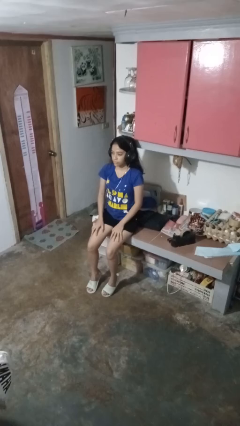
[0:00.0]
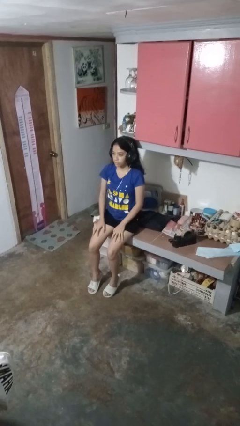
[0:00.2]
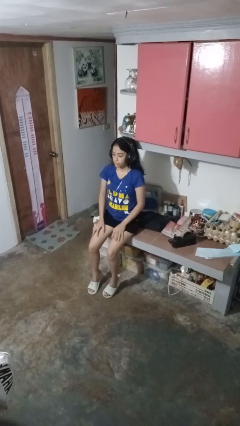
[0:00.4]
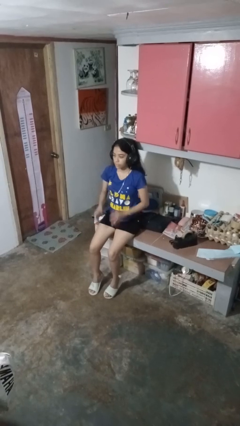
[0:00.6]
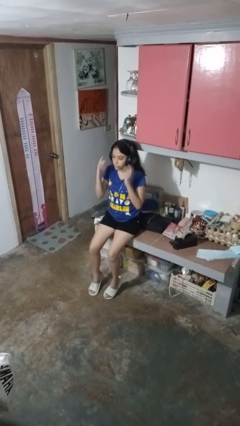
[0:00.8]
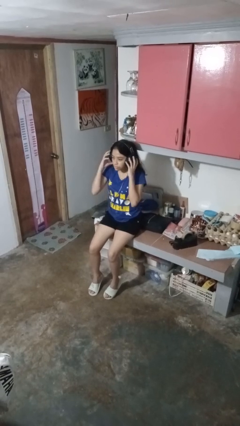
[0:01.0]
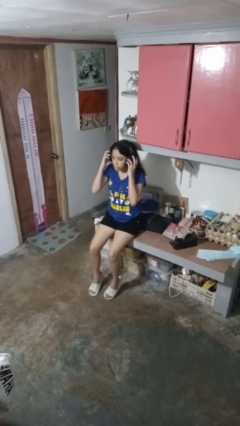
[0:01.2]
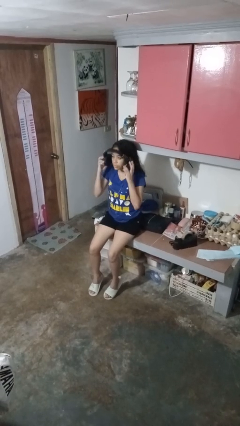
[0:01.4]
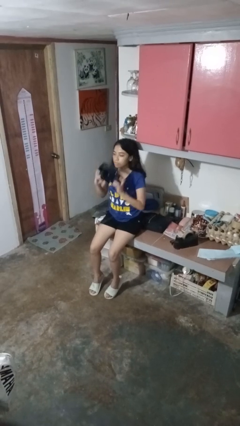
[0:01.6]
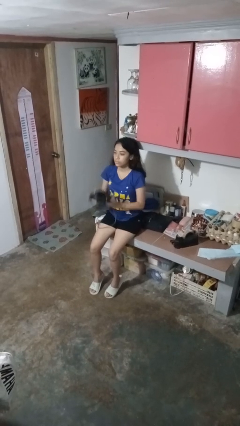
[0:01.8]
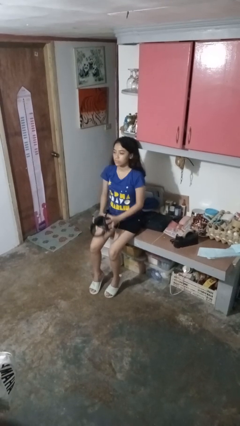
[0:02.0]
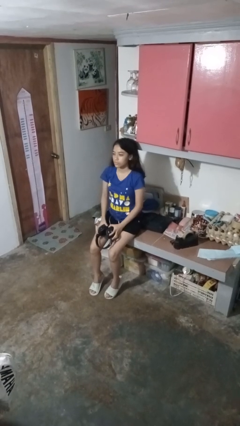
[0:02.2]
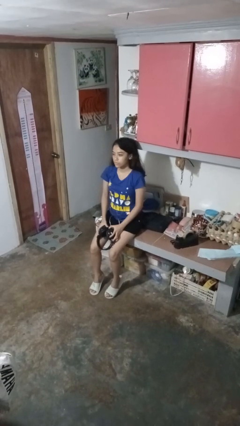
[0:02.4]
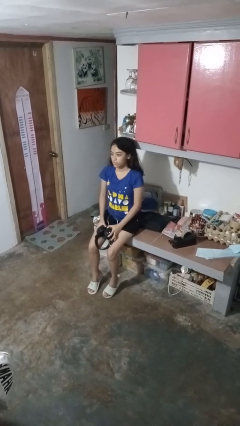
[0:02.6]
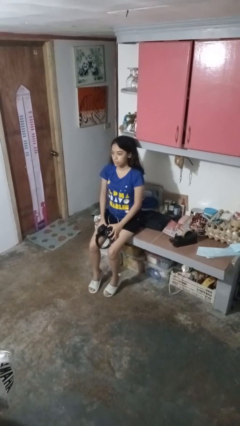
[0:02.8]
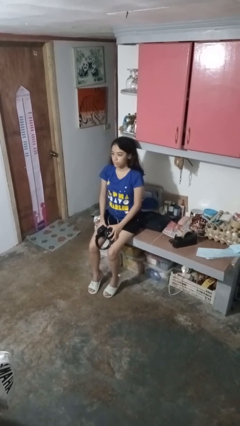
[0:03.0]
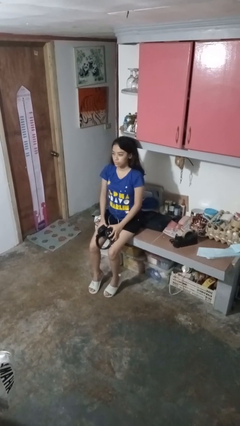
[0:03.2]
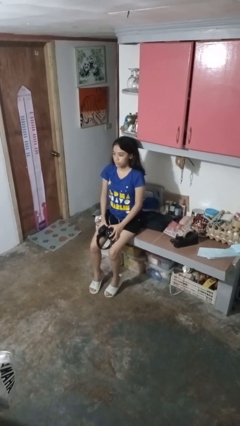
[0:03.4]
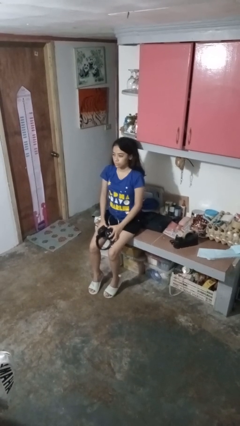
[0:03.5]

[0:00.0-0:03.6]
person takes off headphones

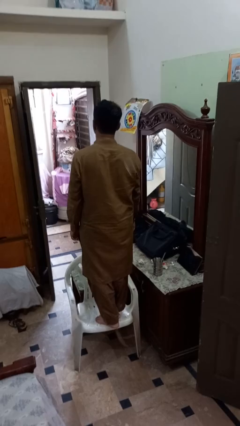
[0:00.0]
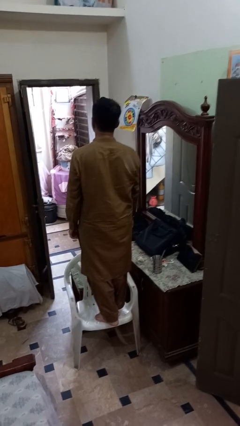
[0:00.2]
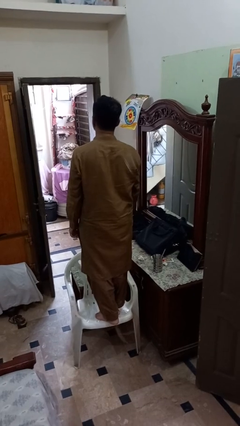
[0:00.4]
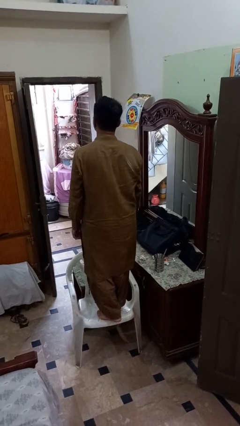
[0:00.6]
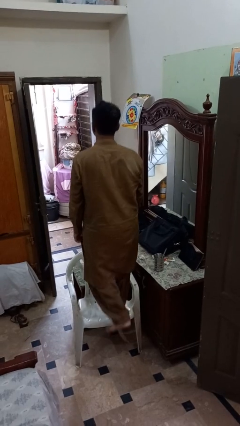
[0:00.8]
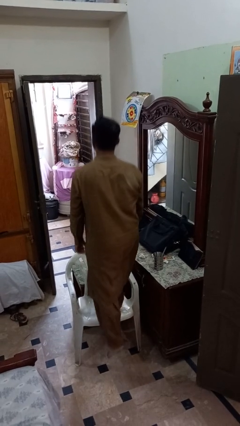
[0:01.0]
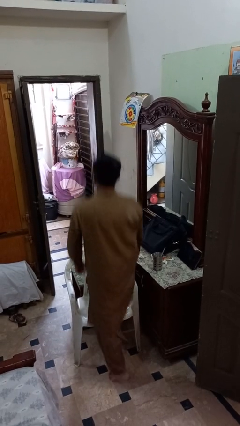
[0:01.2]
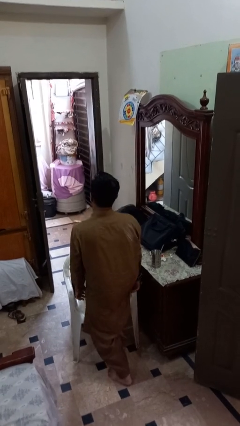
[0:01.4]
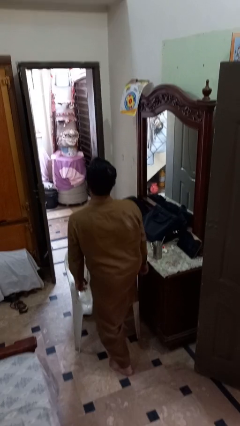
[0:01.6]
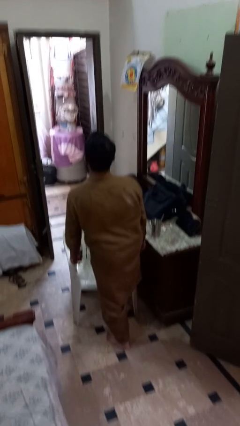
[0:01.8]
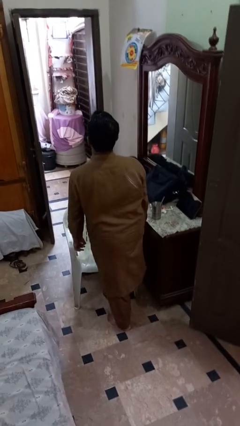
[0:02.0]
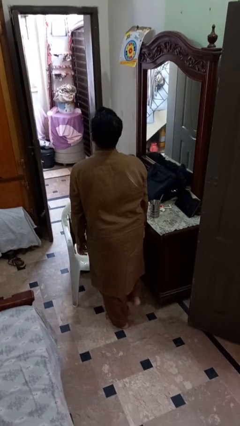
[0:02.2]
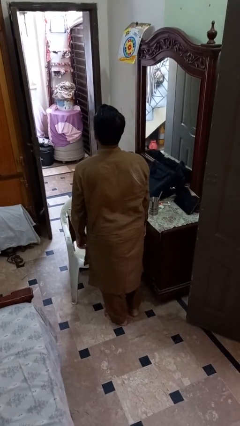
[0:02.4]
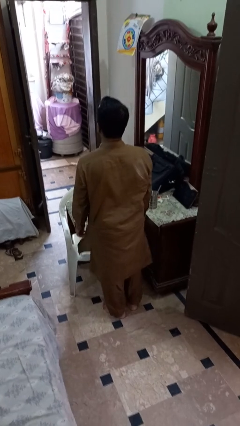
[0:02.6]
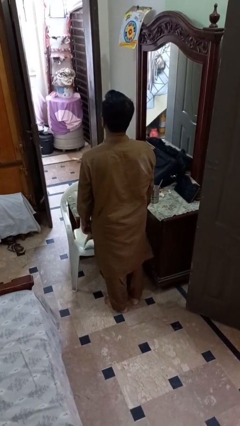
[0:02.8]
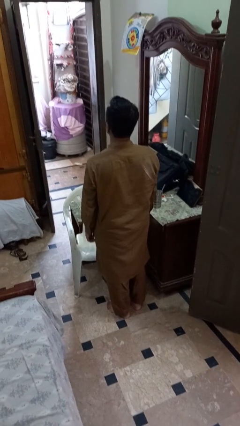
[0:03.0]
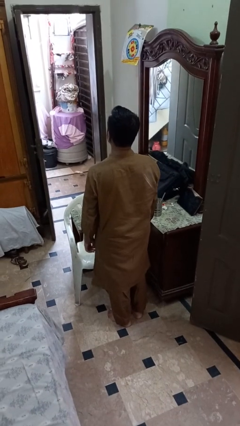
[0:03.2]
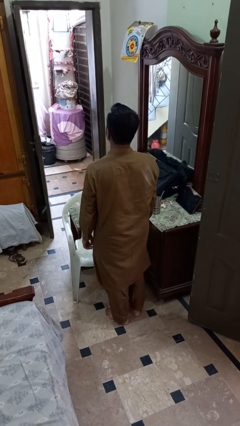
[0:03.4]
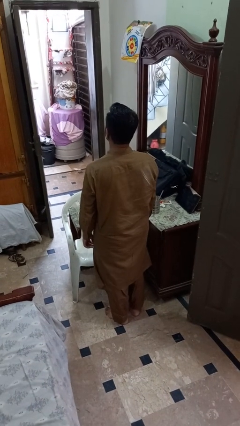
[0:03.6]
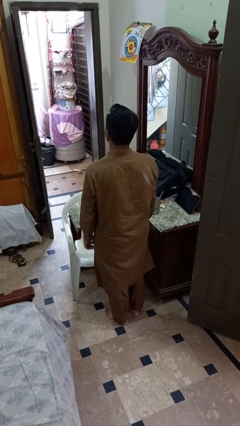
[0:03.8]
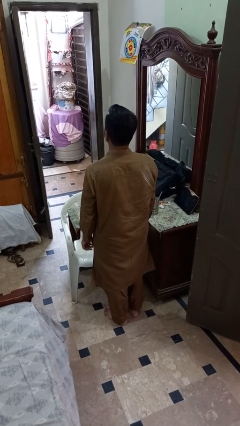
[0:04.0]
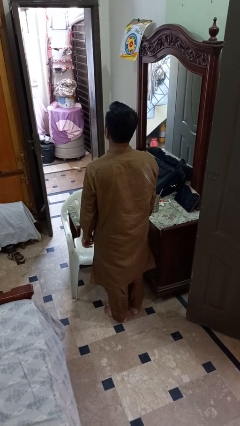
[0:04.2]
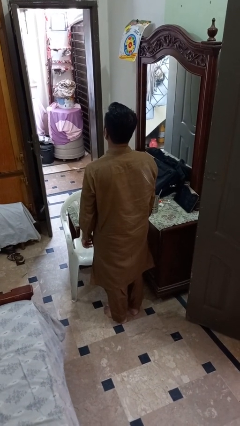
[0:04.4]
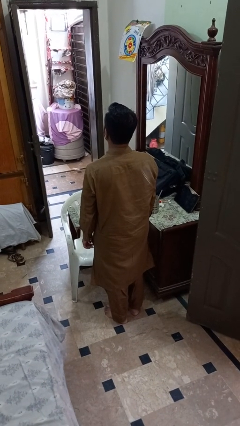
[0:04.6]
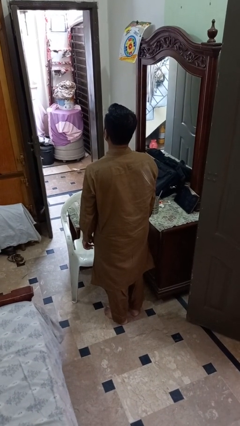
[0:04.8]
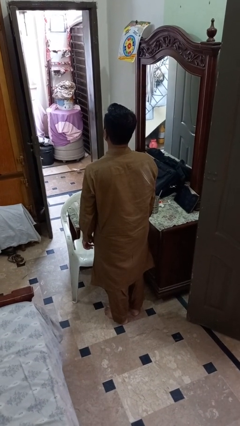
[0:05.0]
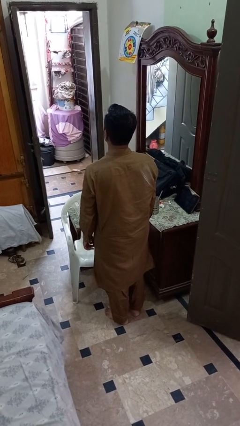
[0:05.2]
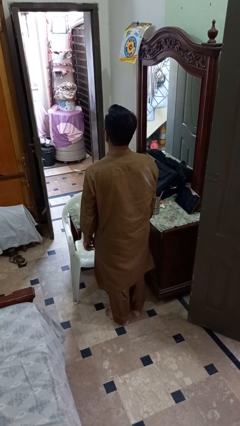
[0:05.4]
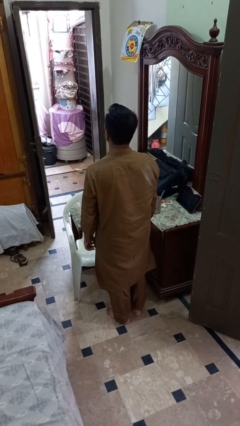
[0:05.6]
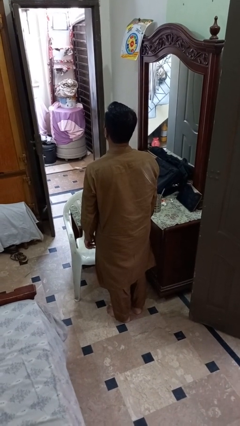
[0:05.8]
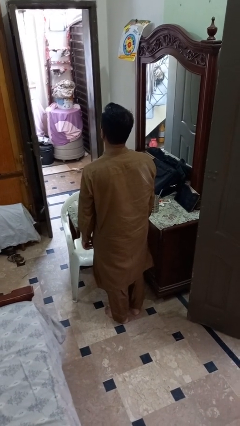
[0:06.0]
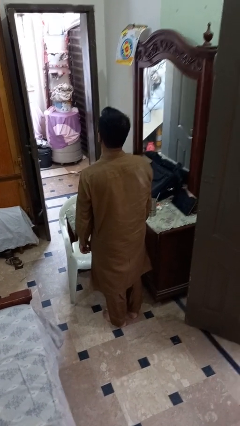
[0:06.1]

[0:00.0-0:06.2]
person climbs off chair

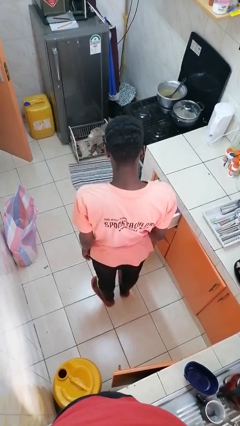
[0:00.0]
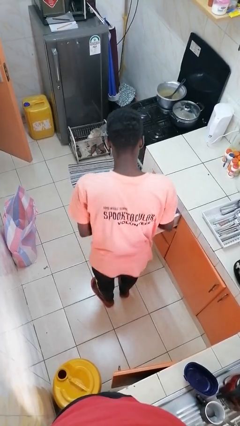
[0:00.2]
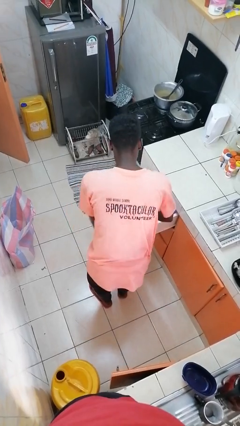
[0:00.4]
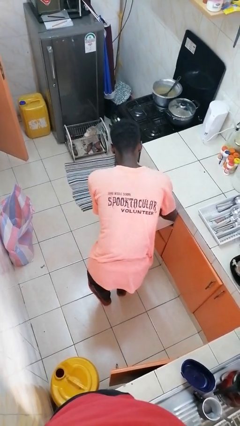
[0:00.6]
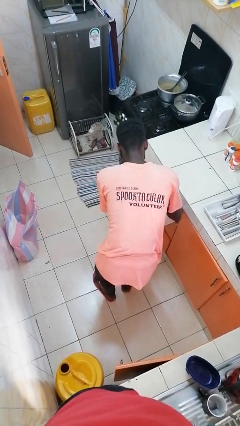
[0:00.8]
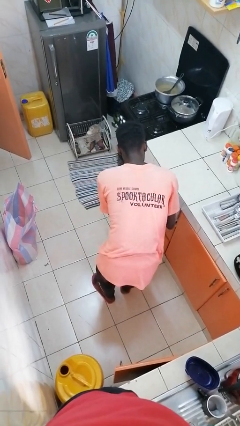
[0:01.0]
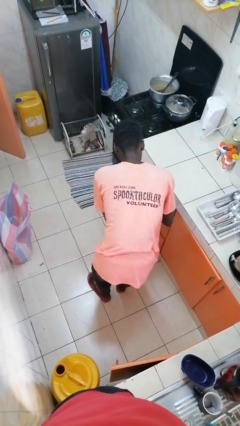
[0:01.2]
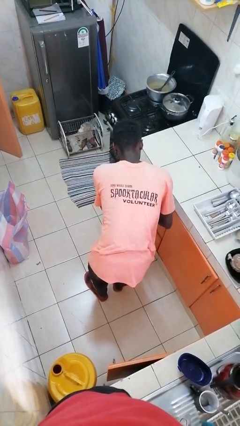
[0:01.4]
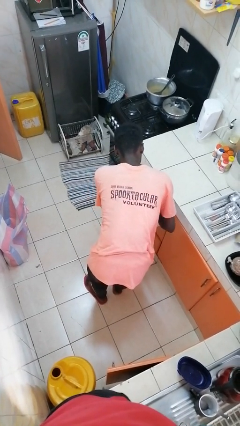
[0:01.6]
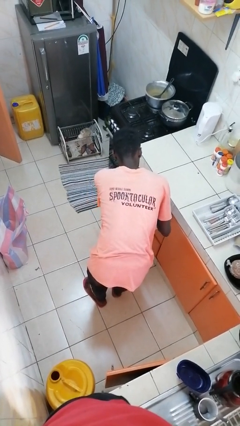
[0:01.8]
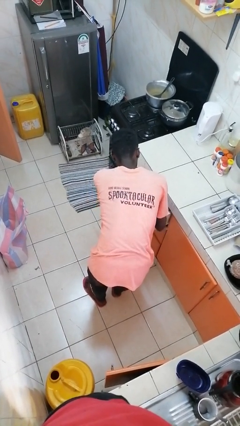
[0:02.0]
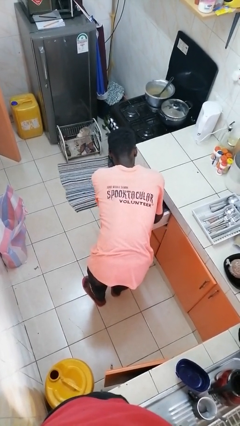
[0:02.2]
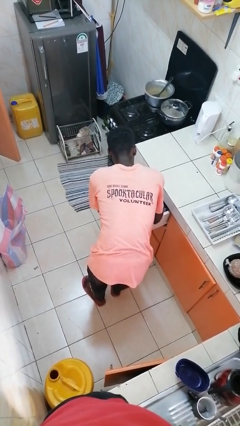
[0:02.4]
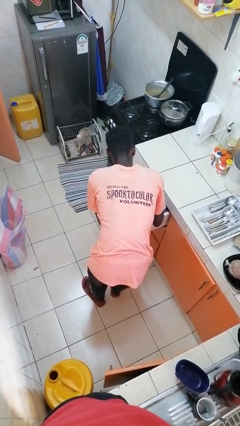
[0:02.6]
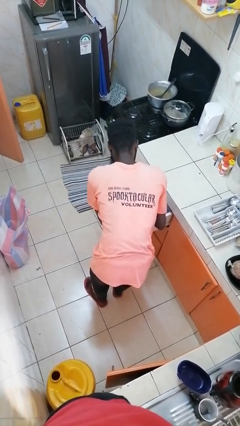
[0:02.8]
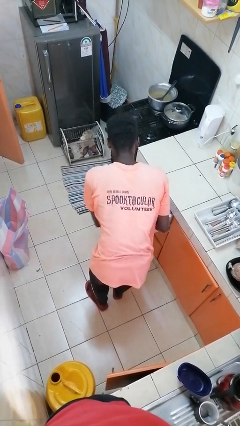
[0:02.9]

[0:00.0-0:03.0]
person searches in kitchen drawer

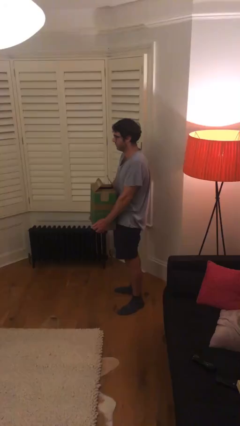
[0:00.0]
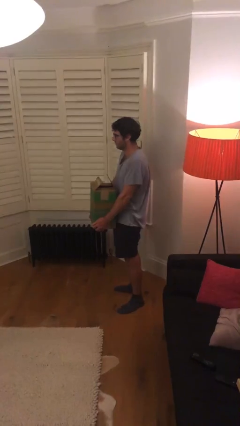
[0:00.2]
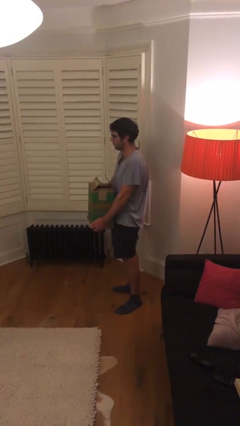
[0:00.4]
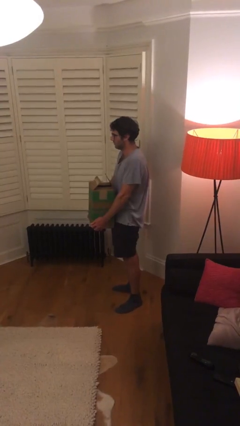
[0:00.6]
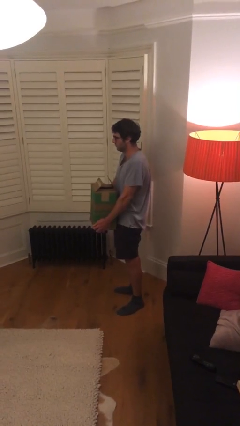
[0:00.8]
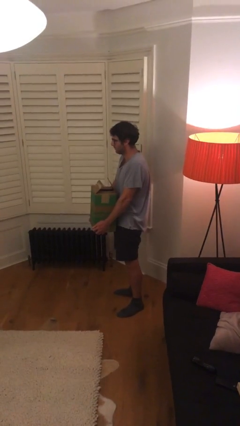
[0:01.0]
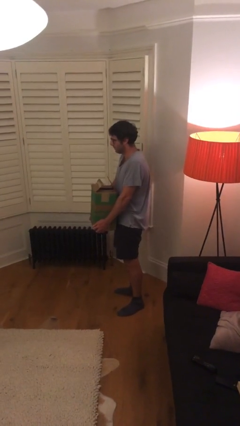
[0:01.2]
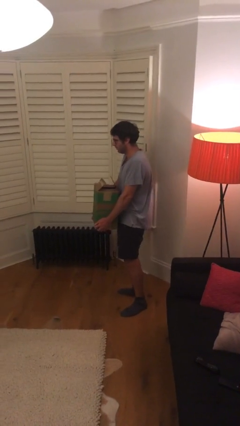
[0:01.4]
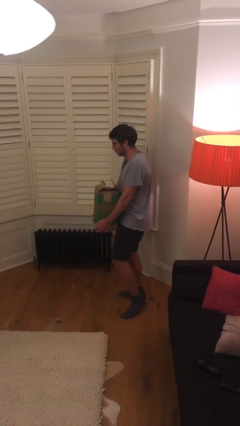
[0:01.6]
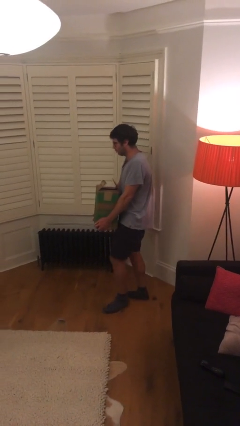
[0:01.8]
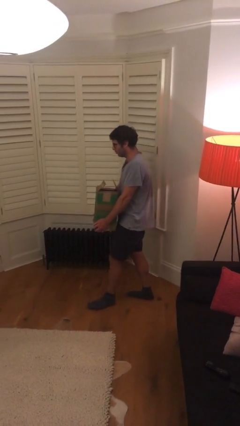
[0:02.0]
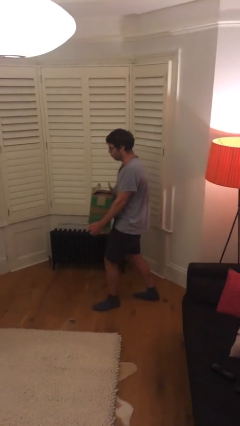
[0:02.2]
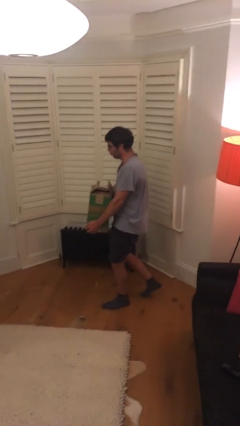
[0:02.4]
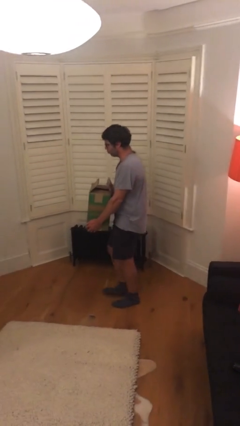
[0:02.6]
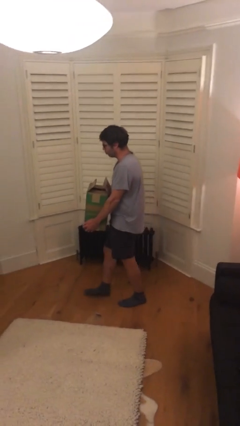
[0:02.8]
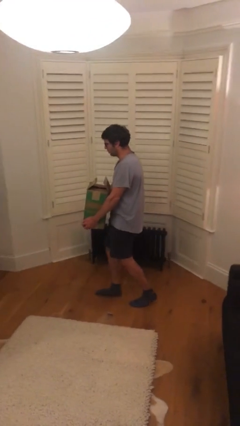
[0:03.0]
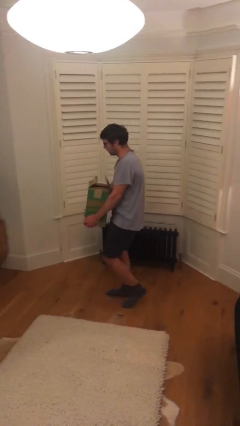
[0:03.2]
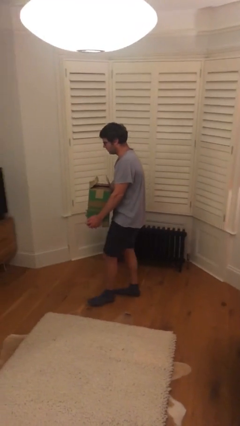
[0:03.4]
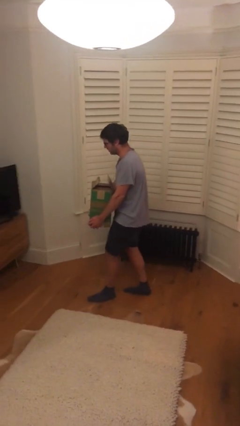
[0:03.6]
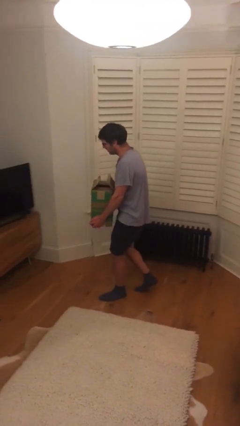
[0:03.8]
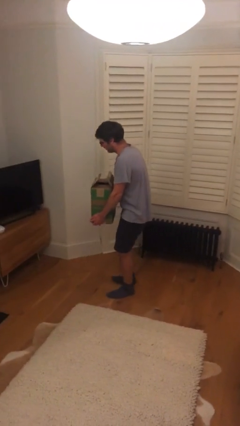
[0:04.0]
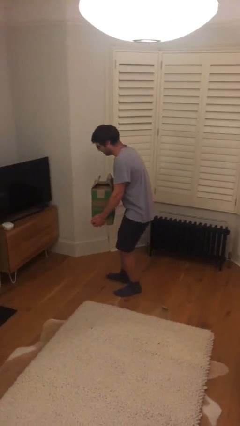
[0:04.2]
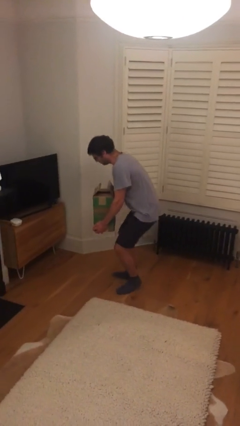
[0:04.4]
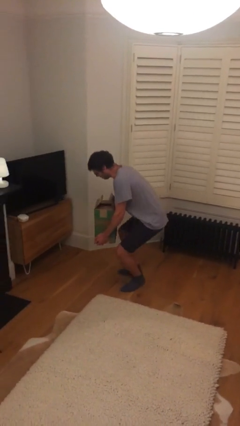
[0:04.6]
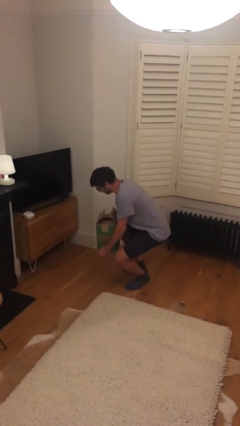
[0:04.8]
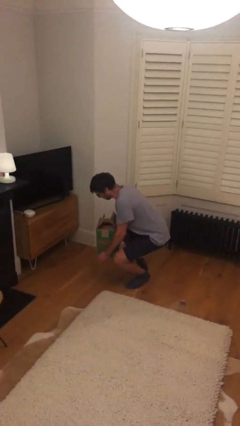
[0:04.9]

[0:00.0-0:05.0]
person carries heavy object

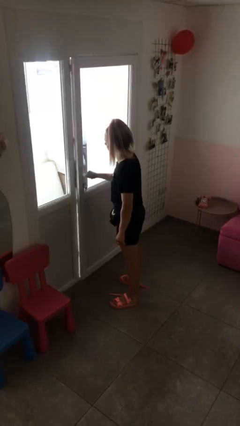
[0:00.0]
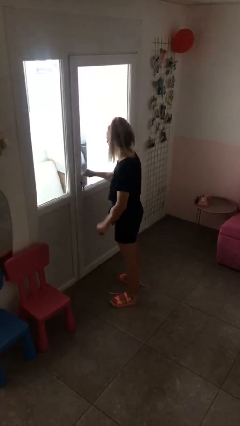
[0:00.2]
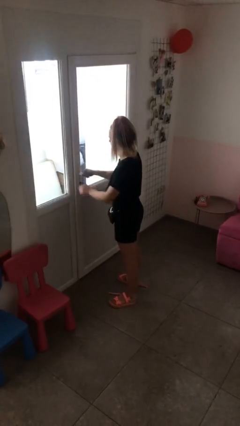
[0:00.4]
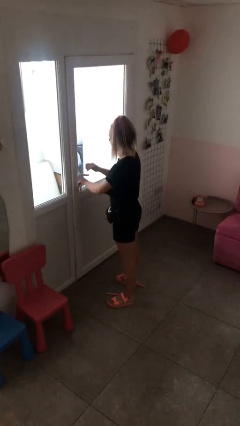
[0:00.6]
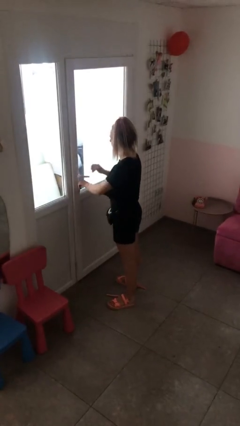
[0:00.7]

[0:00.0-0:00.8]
person closes facility door
